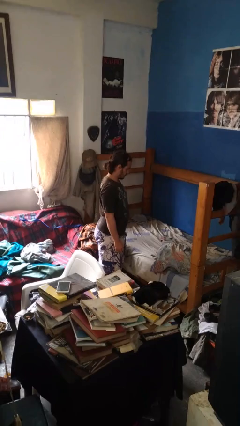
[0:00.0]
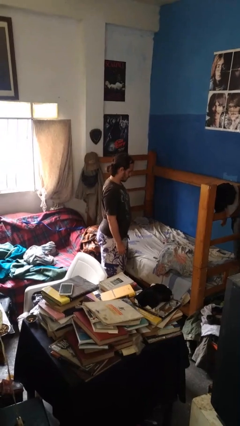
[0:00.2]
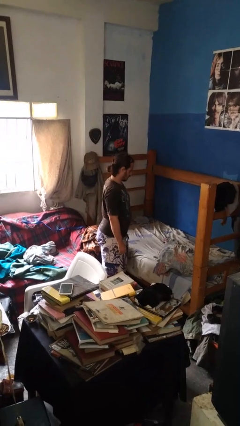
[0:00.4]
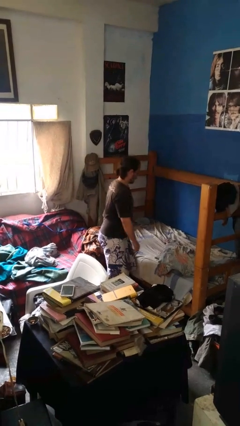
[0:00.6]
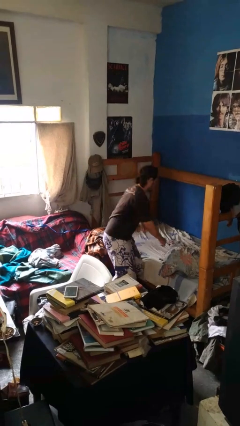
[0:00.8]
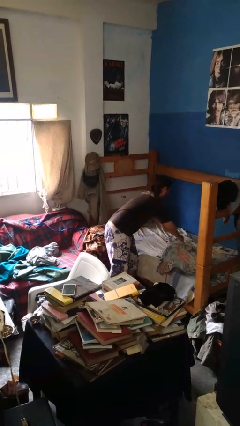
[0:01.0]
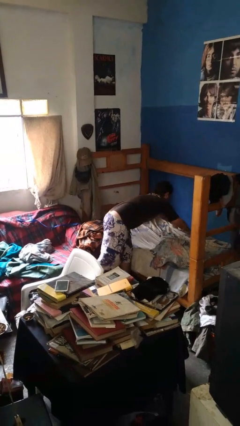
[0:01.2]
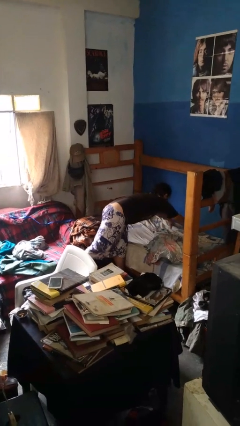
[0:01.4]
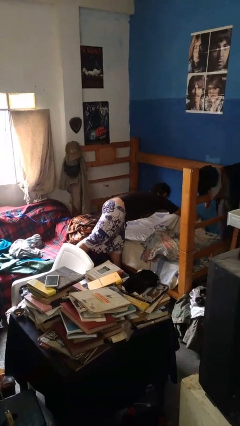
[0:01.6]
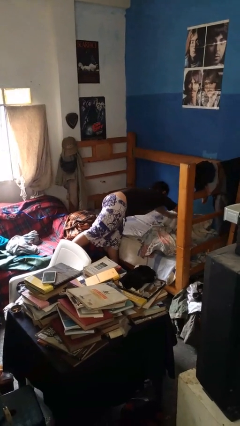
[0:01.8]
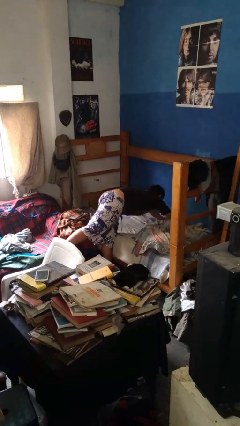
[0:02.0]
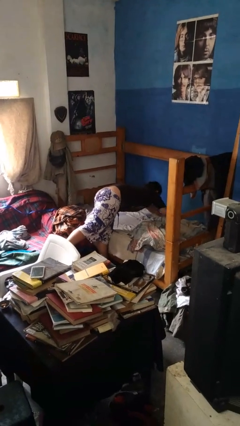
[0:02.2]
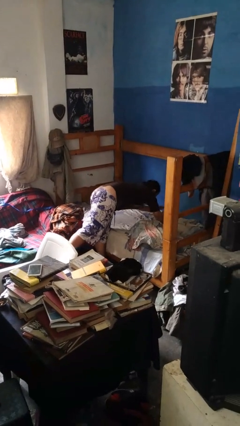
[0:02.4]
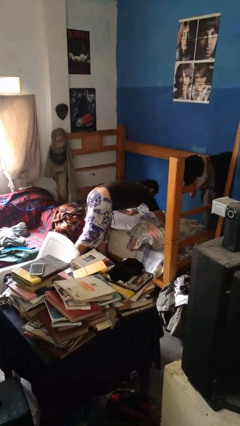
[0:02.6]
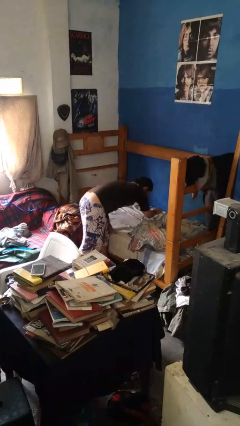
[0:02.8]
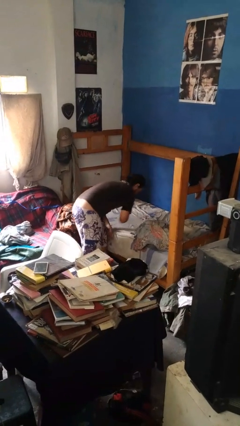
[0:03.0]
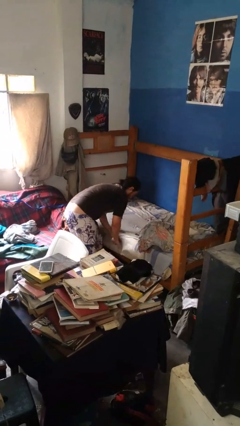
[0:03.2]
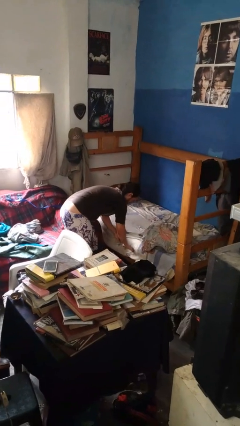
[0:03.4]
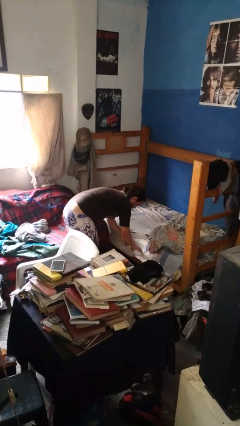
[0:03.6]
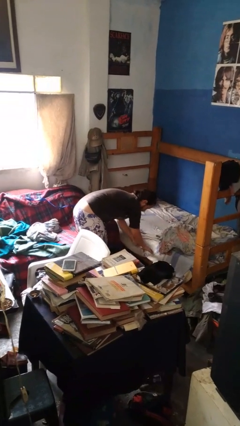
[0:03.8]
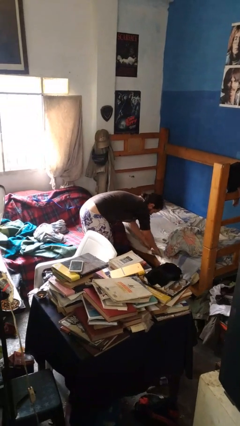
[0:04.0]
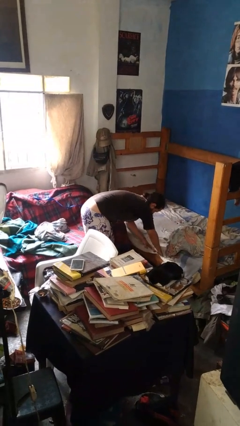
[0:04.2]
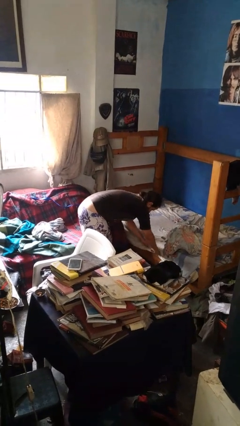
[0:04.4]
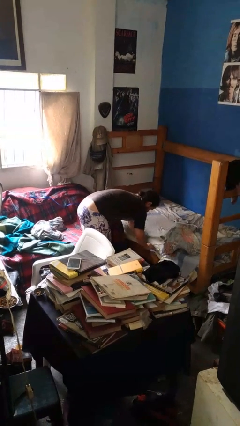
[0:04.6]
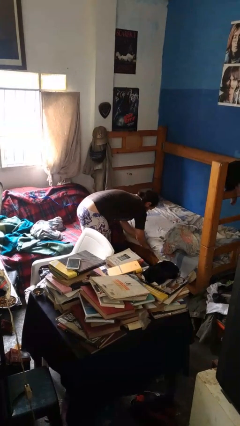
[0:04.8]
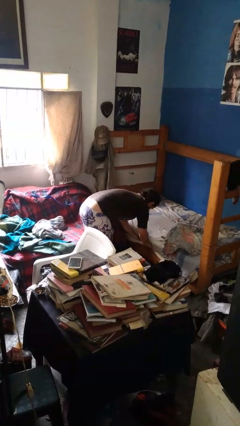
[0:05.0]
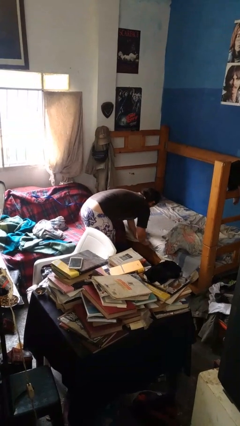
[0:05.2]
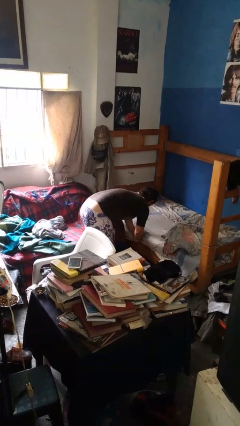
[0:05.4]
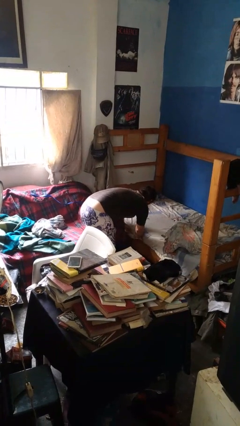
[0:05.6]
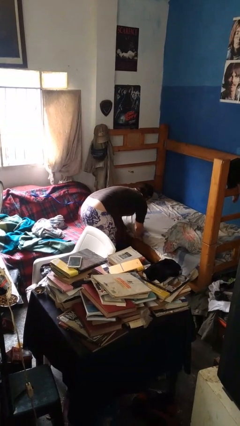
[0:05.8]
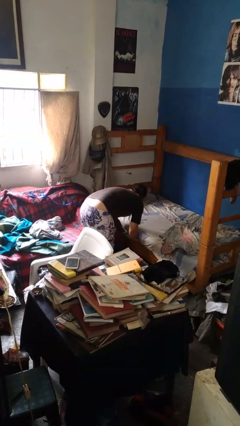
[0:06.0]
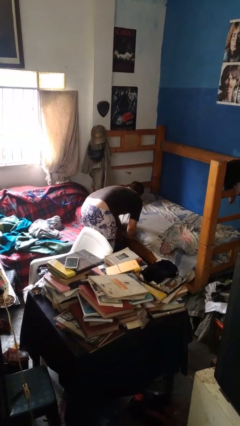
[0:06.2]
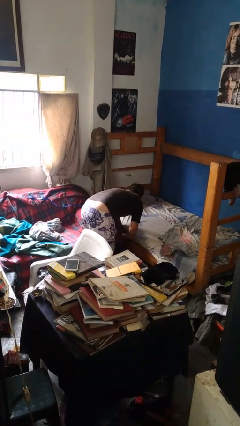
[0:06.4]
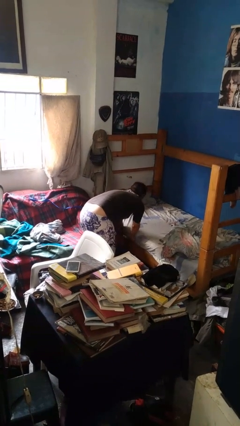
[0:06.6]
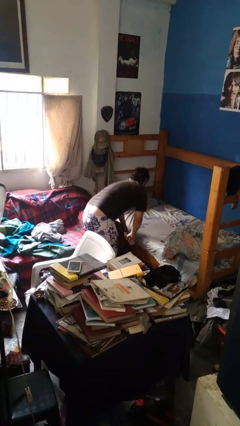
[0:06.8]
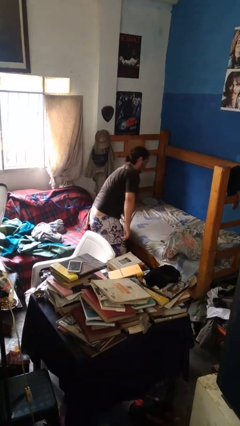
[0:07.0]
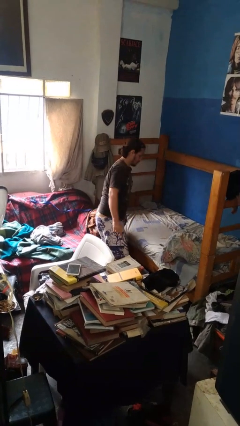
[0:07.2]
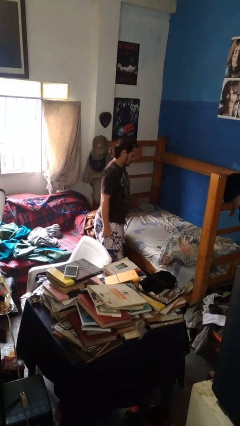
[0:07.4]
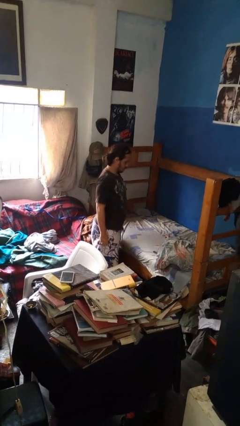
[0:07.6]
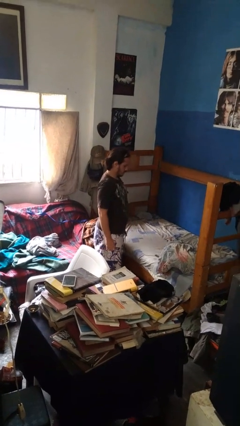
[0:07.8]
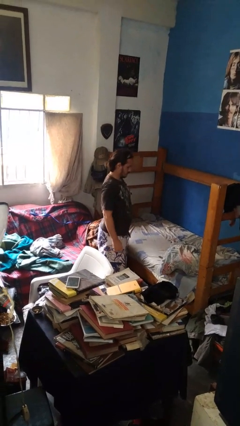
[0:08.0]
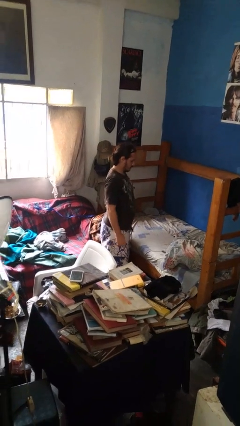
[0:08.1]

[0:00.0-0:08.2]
person makes bed

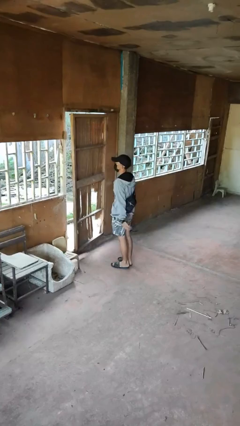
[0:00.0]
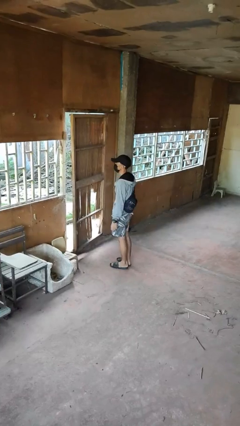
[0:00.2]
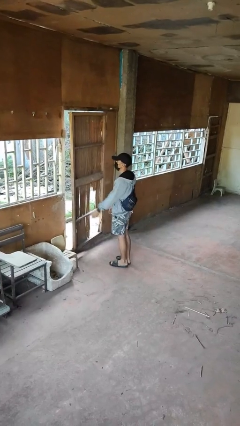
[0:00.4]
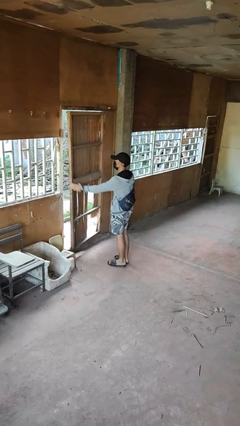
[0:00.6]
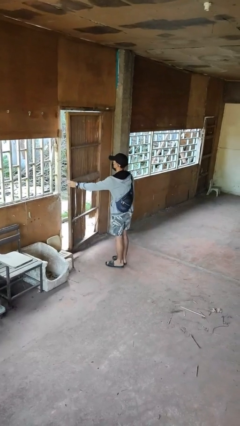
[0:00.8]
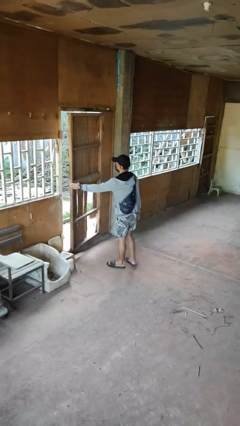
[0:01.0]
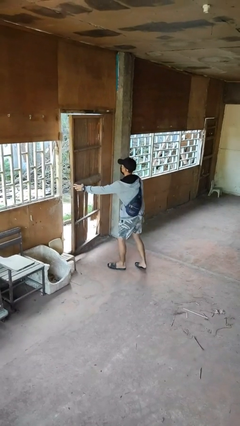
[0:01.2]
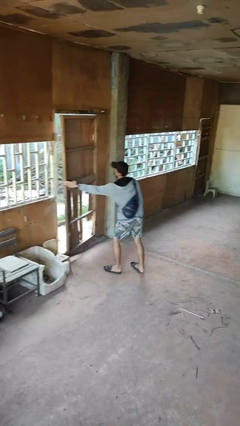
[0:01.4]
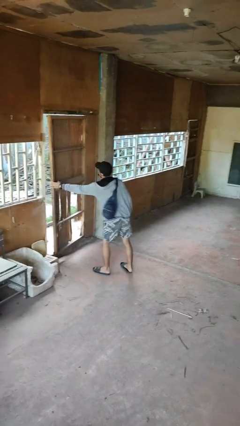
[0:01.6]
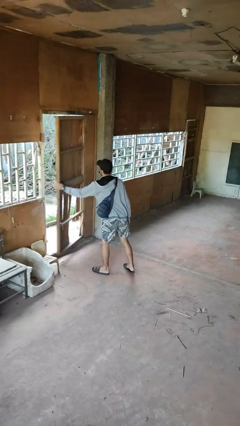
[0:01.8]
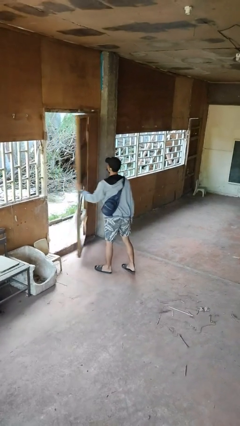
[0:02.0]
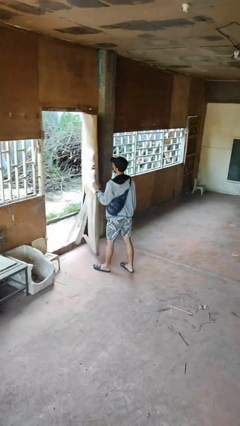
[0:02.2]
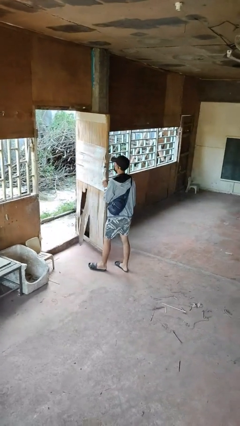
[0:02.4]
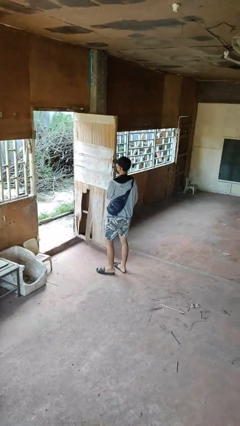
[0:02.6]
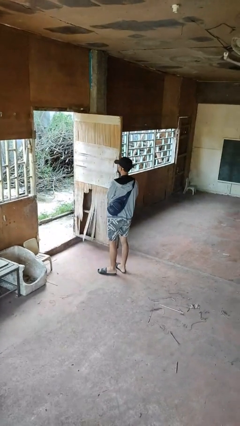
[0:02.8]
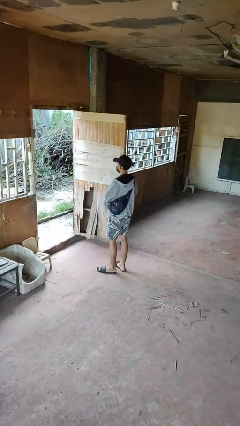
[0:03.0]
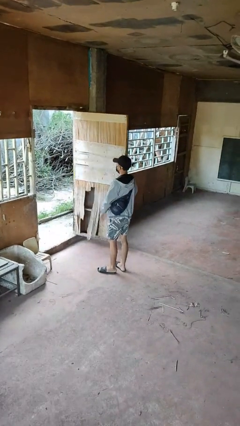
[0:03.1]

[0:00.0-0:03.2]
person opens facility door

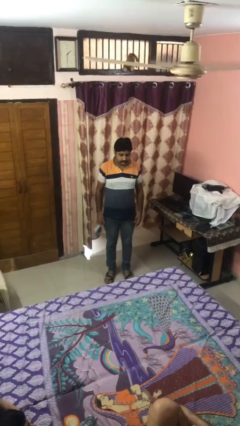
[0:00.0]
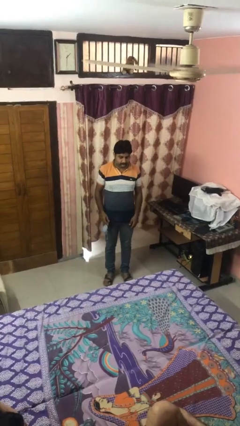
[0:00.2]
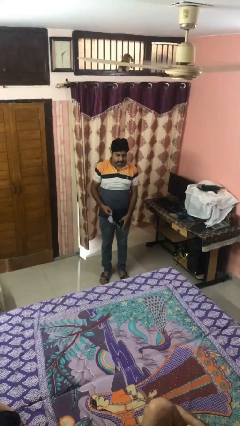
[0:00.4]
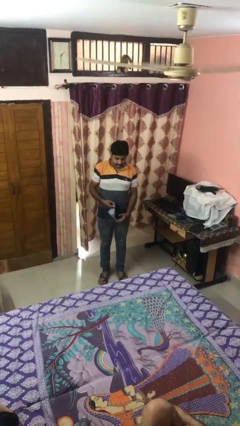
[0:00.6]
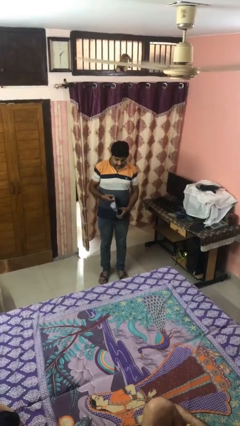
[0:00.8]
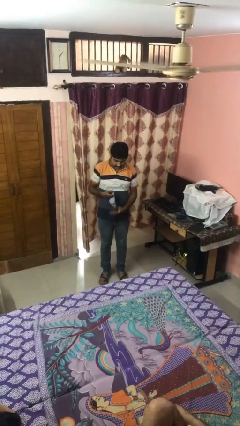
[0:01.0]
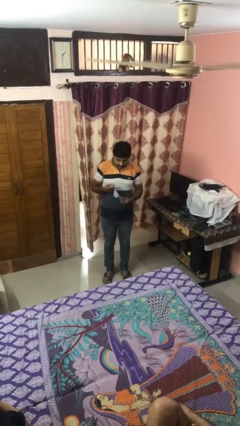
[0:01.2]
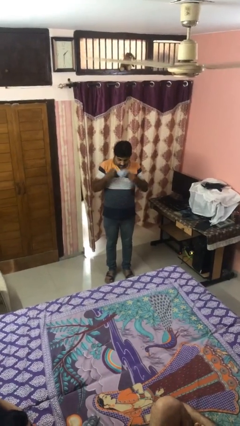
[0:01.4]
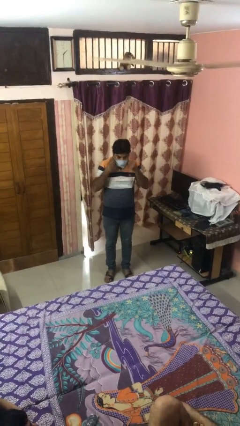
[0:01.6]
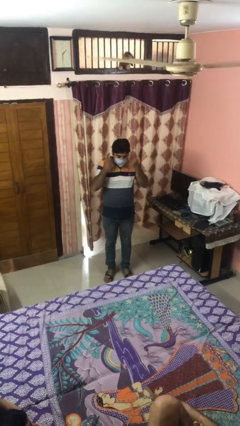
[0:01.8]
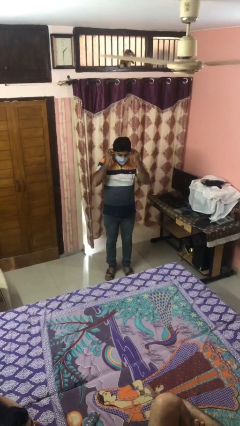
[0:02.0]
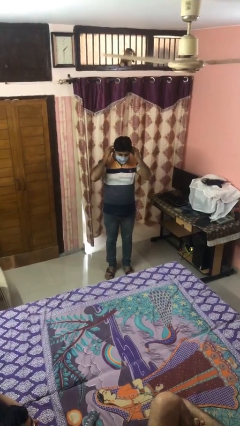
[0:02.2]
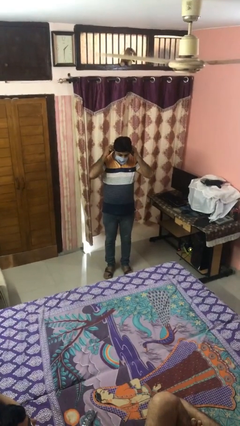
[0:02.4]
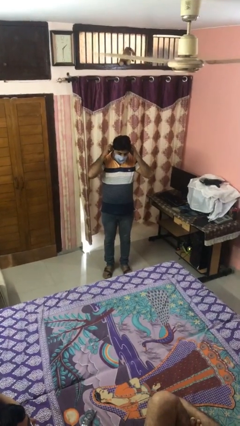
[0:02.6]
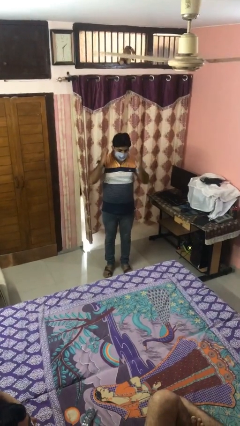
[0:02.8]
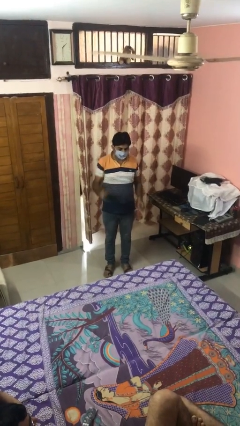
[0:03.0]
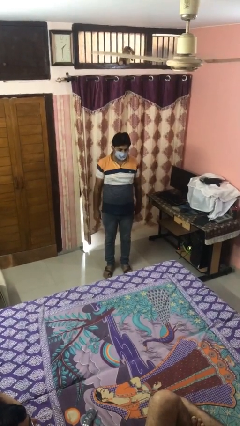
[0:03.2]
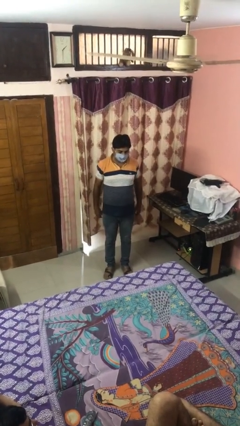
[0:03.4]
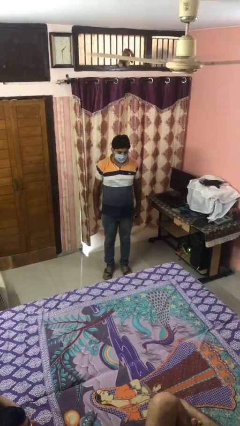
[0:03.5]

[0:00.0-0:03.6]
person puts on facemask

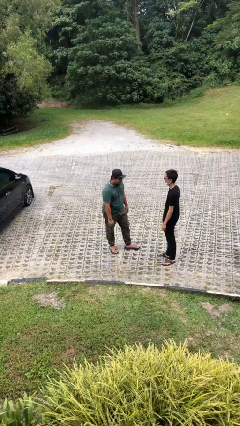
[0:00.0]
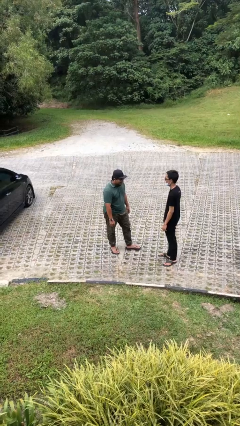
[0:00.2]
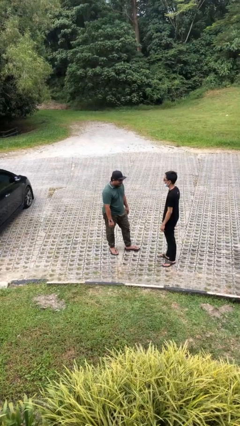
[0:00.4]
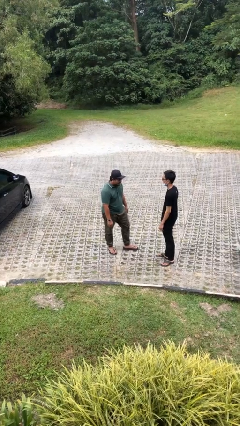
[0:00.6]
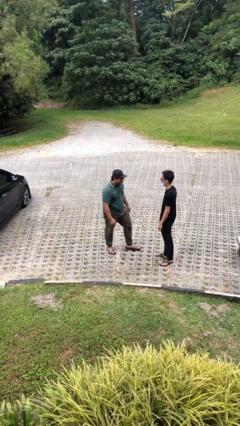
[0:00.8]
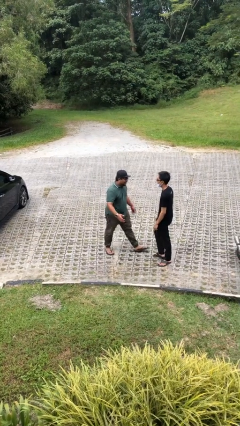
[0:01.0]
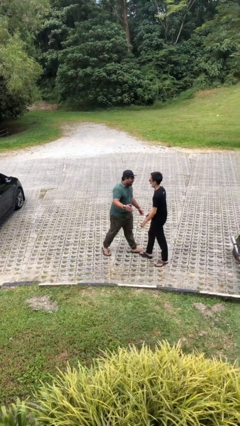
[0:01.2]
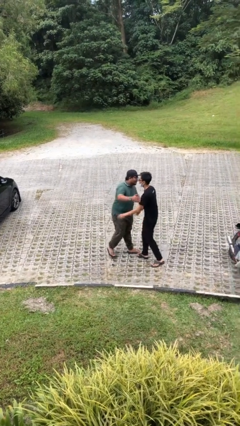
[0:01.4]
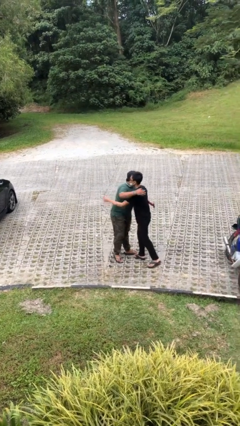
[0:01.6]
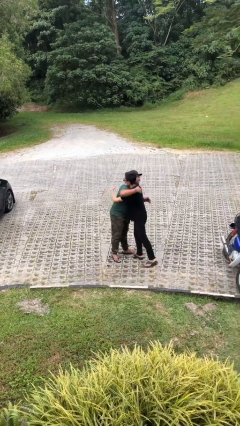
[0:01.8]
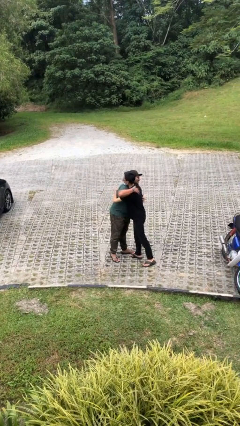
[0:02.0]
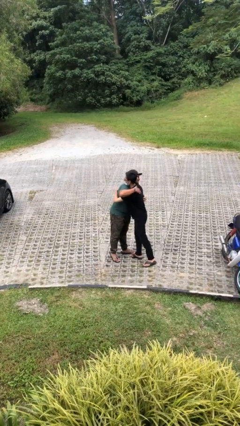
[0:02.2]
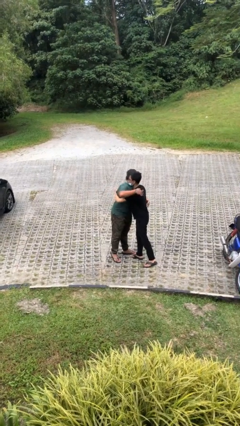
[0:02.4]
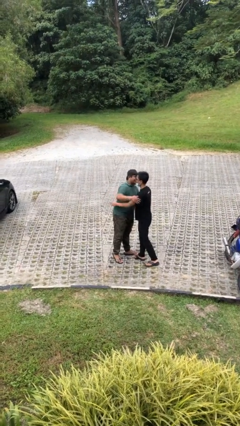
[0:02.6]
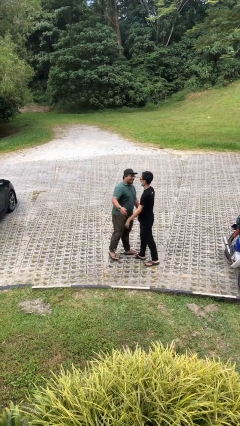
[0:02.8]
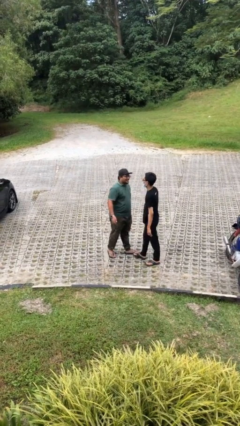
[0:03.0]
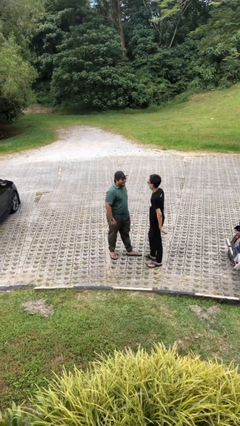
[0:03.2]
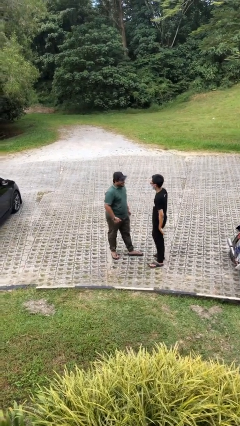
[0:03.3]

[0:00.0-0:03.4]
person embraces person
